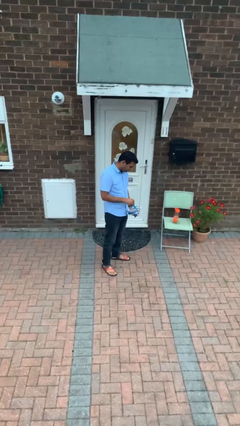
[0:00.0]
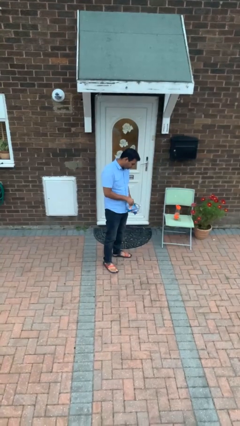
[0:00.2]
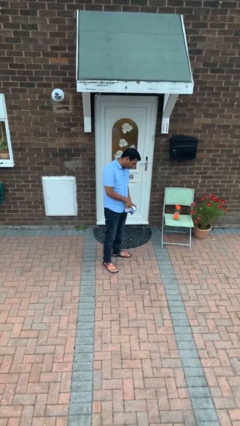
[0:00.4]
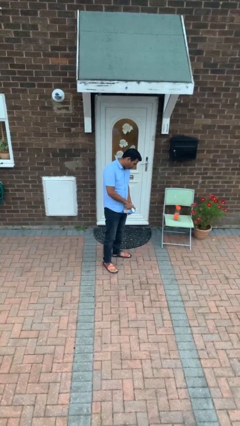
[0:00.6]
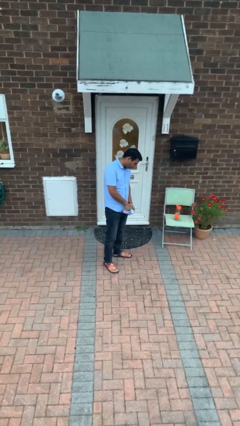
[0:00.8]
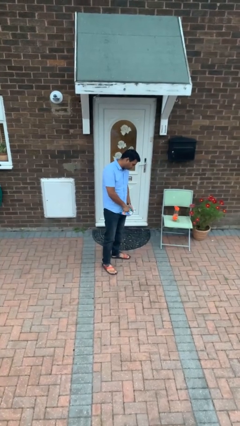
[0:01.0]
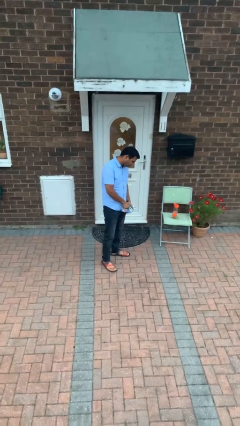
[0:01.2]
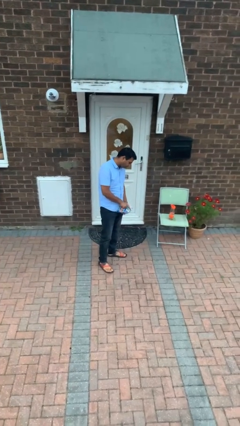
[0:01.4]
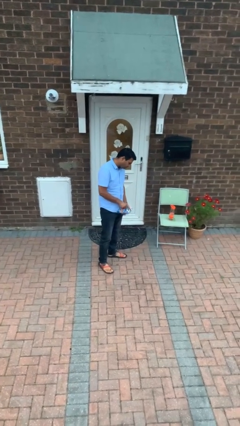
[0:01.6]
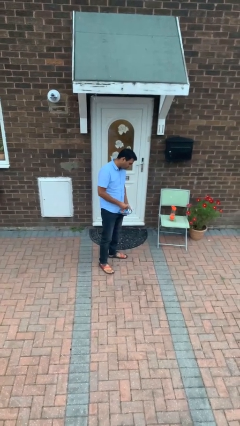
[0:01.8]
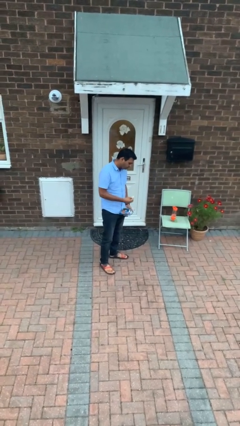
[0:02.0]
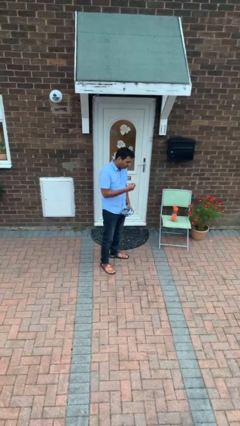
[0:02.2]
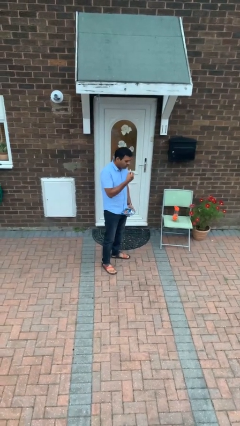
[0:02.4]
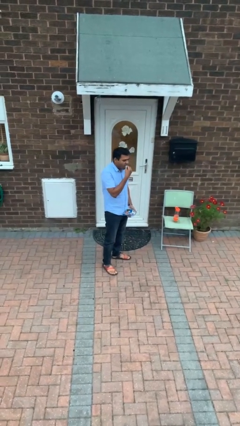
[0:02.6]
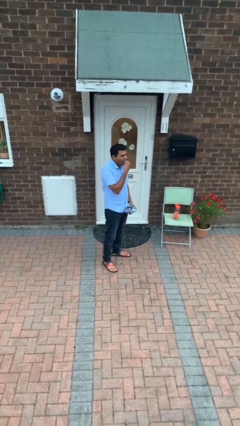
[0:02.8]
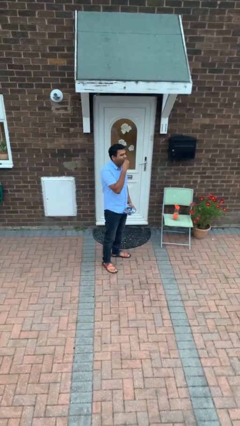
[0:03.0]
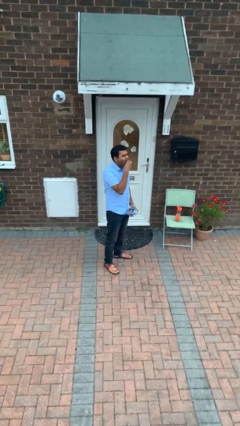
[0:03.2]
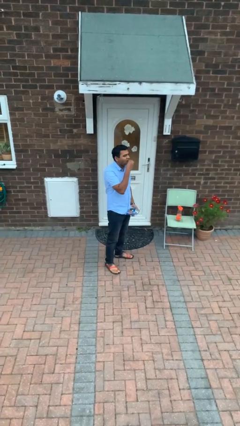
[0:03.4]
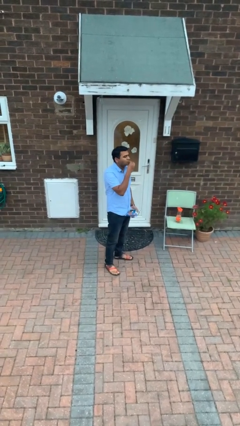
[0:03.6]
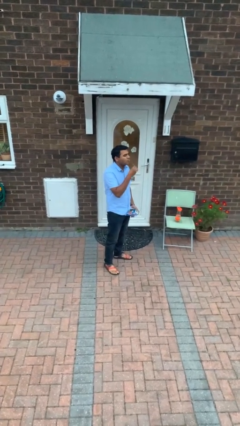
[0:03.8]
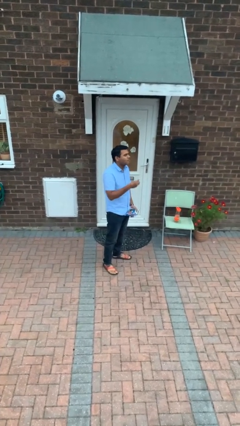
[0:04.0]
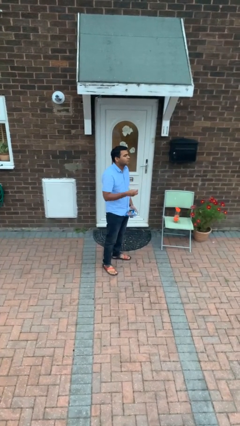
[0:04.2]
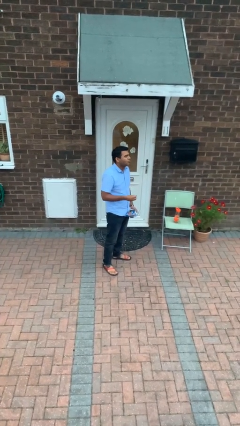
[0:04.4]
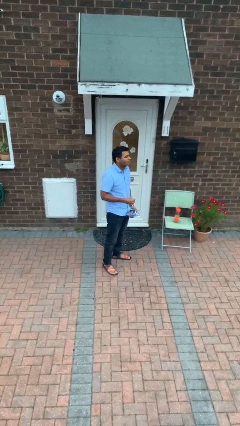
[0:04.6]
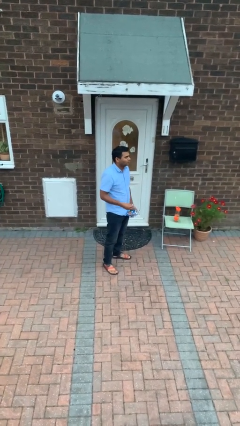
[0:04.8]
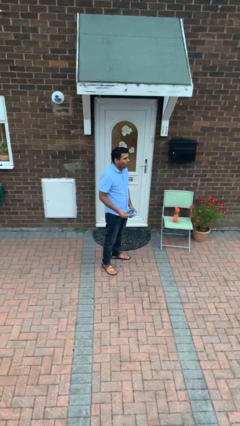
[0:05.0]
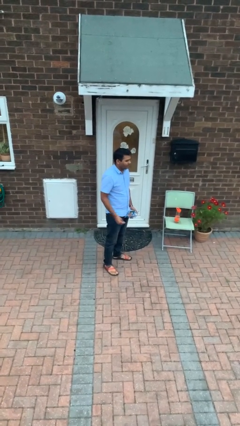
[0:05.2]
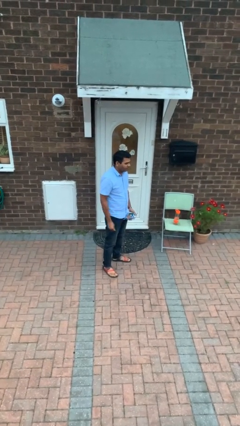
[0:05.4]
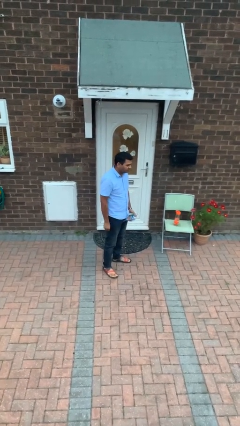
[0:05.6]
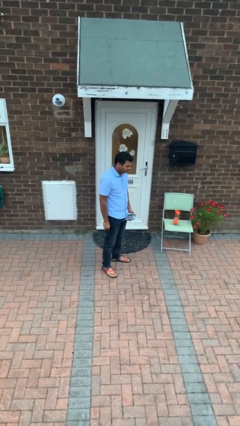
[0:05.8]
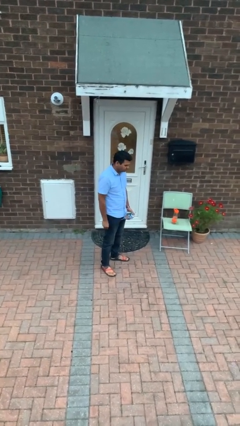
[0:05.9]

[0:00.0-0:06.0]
person eats snack from bag

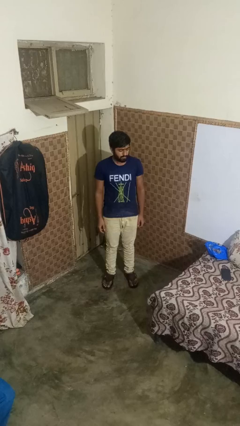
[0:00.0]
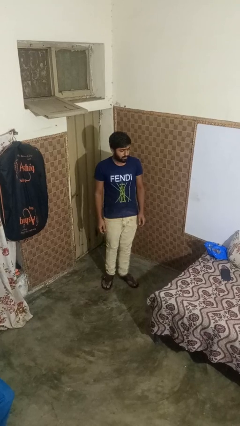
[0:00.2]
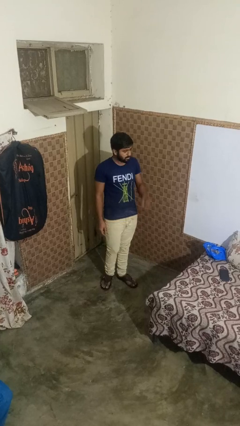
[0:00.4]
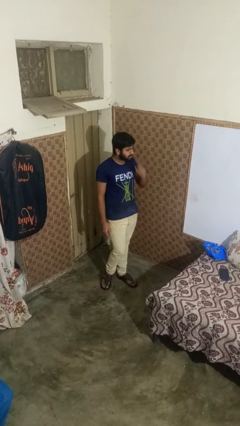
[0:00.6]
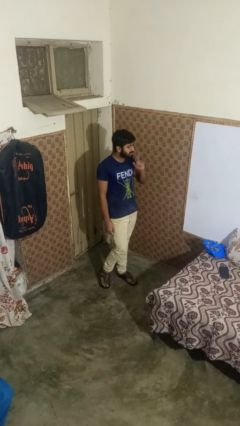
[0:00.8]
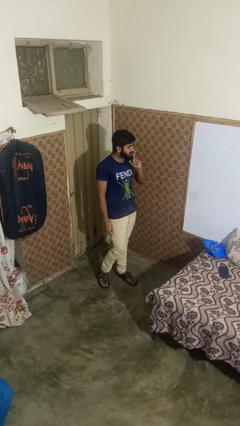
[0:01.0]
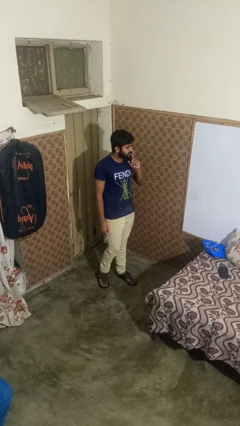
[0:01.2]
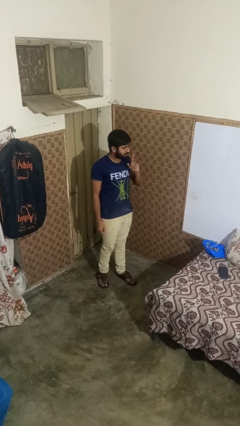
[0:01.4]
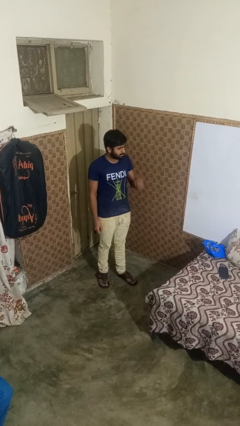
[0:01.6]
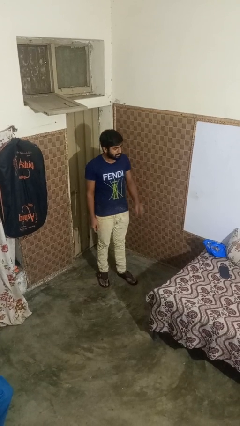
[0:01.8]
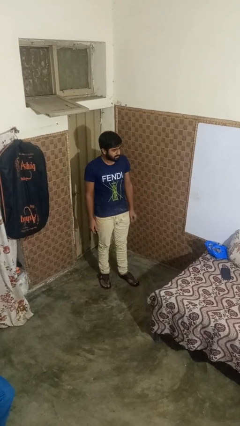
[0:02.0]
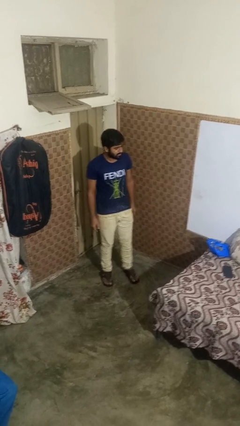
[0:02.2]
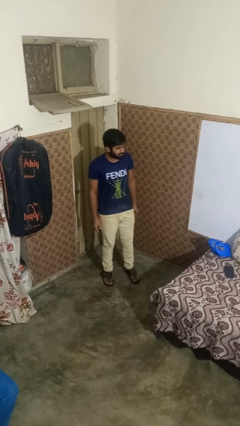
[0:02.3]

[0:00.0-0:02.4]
person gestures be quiet

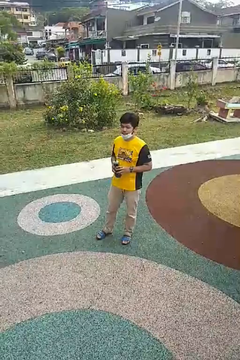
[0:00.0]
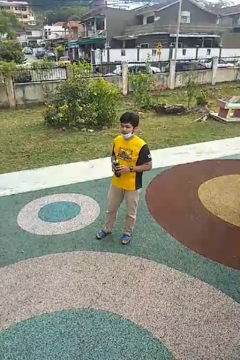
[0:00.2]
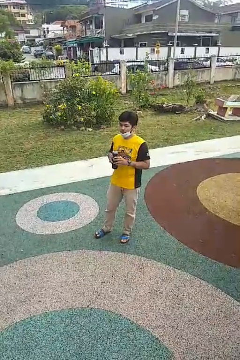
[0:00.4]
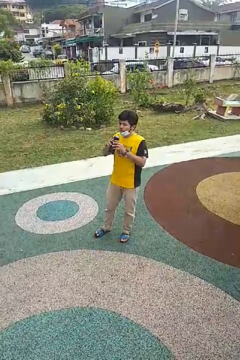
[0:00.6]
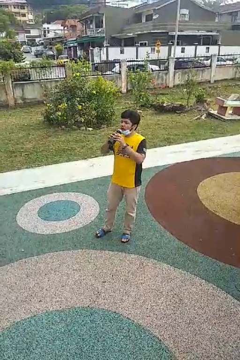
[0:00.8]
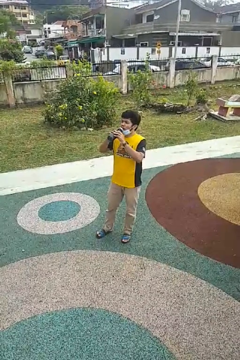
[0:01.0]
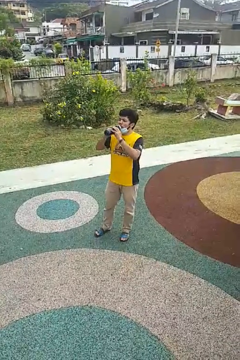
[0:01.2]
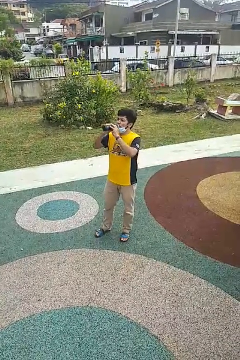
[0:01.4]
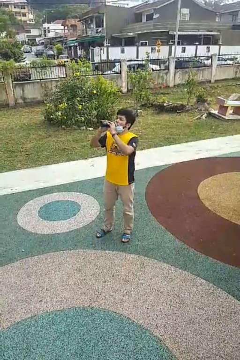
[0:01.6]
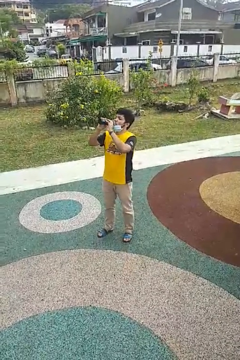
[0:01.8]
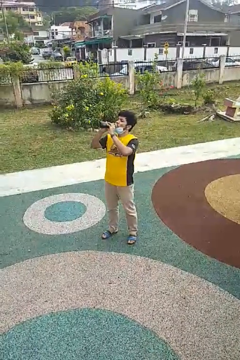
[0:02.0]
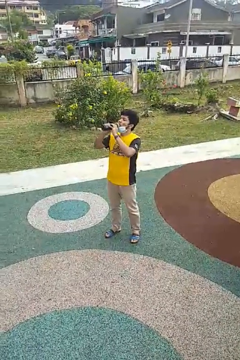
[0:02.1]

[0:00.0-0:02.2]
person drinks from bottle

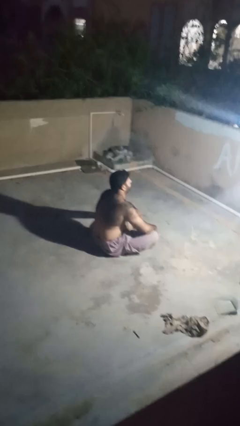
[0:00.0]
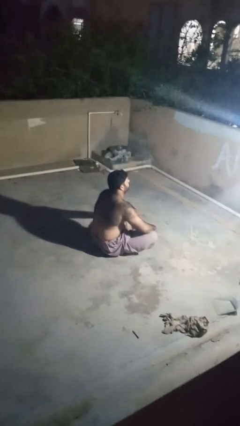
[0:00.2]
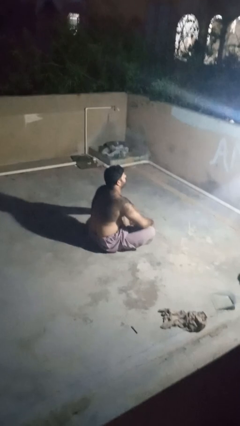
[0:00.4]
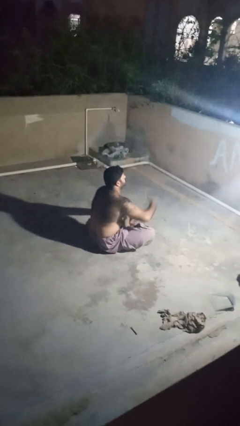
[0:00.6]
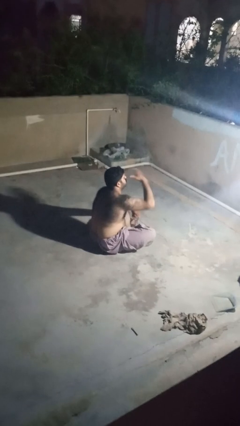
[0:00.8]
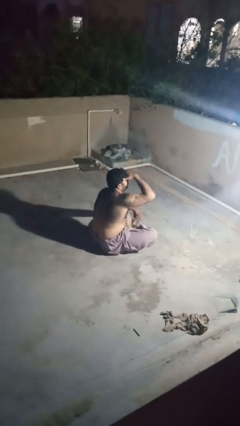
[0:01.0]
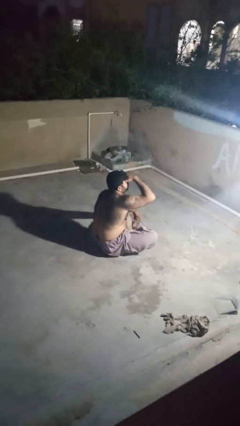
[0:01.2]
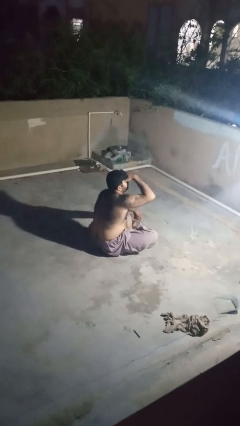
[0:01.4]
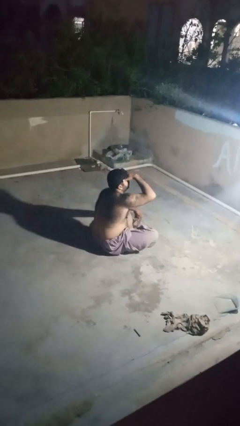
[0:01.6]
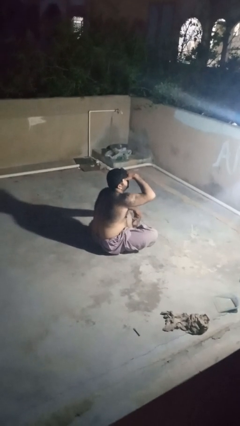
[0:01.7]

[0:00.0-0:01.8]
person shades eyes

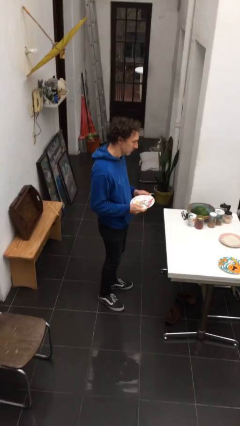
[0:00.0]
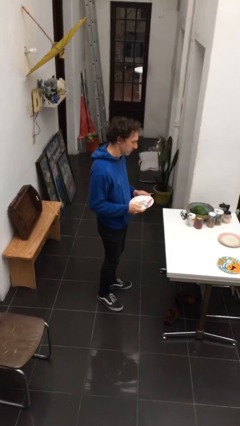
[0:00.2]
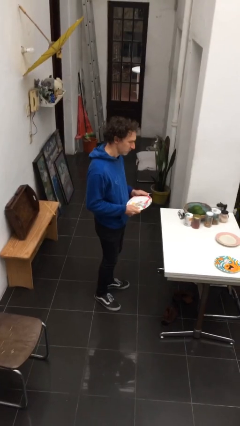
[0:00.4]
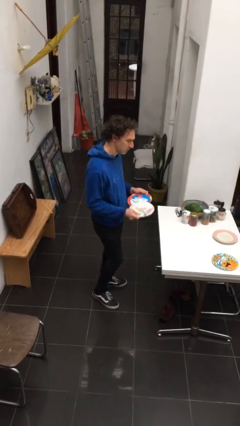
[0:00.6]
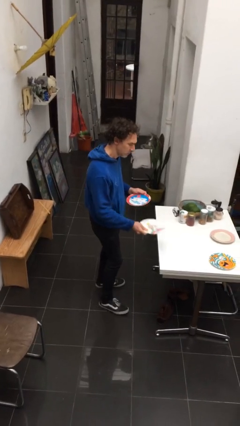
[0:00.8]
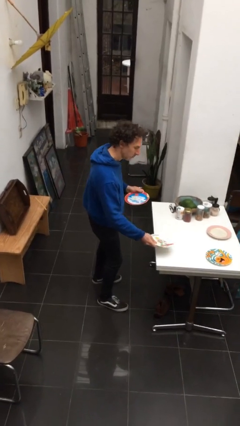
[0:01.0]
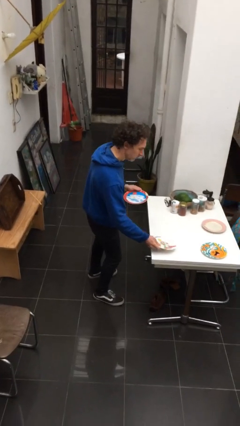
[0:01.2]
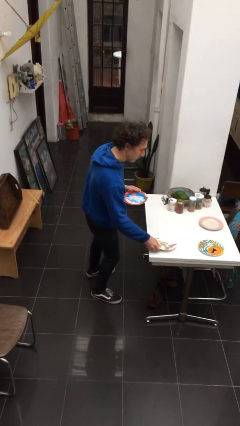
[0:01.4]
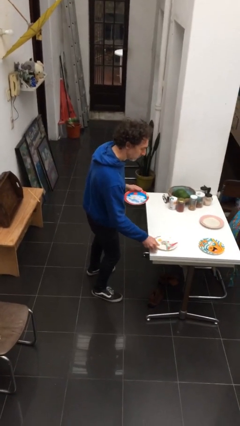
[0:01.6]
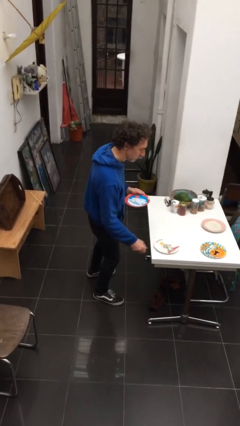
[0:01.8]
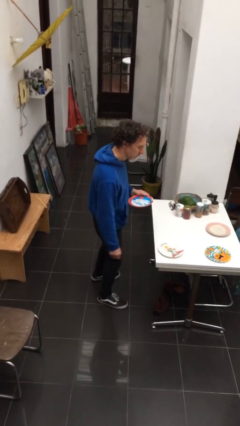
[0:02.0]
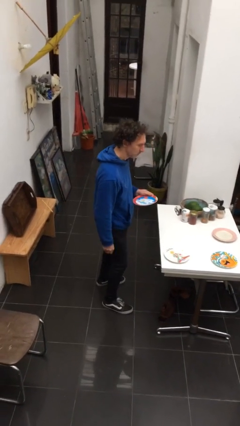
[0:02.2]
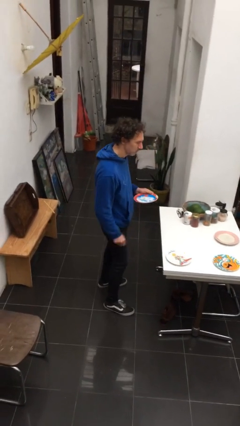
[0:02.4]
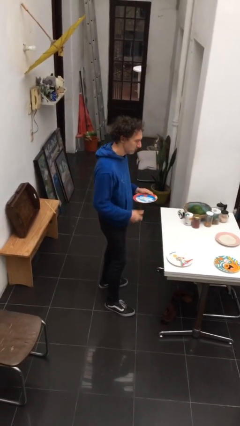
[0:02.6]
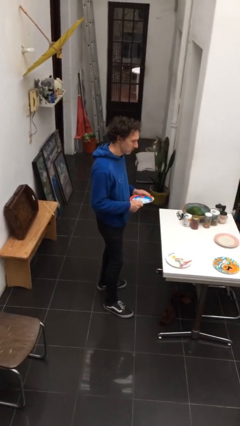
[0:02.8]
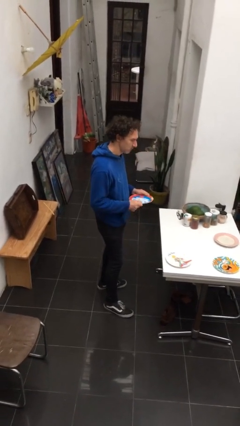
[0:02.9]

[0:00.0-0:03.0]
person sets table

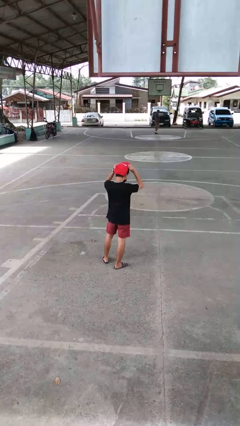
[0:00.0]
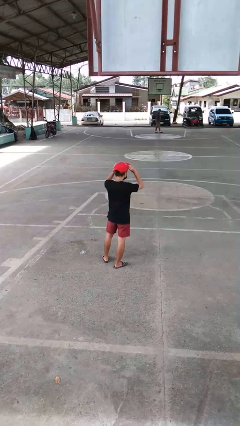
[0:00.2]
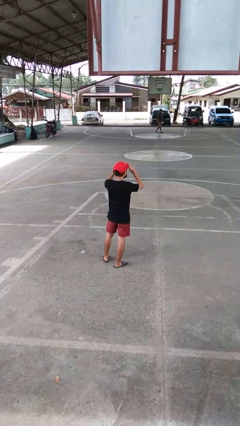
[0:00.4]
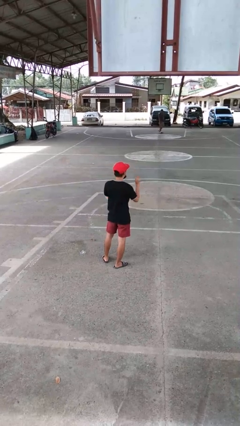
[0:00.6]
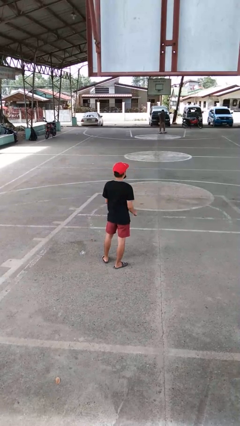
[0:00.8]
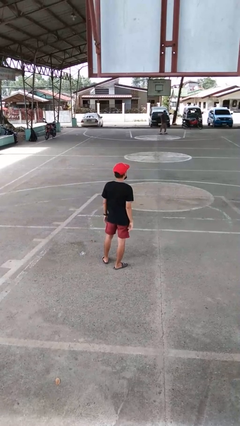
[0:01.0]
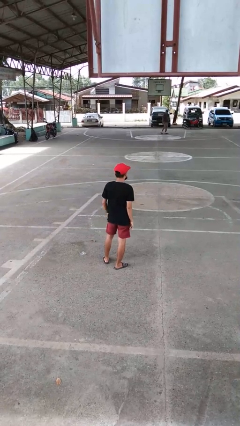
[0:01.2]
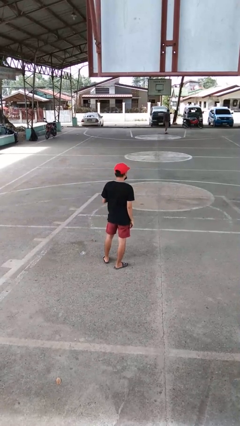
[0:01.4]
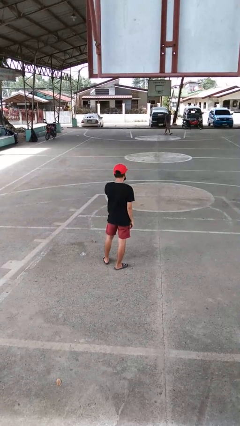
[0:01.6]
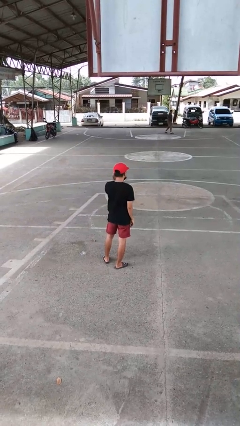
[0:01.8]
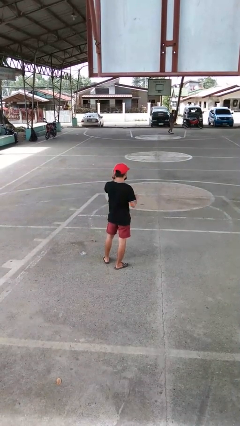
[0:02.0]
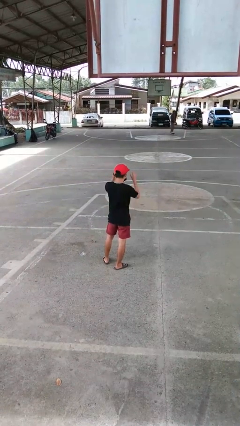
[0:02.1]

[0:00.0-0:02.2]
person puts on hat
